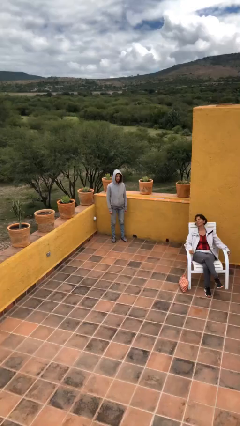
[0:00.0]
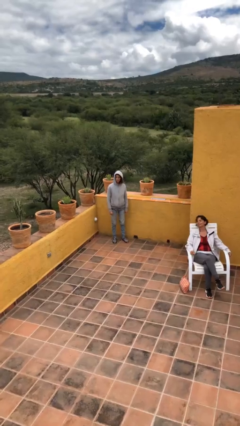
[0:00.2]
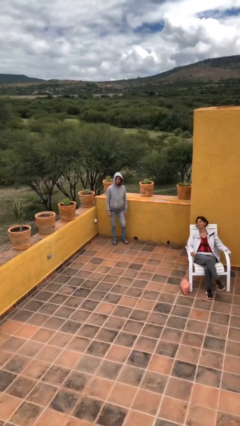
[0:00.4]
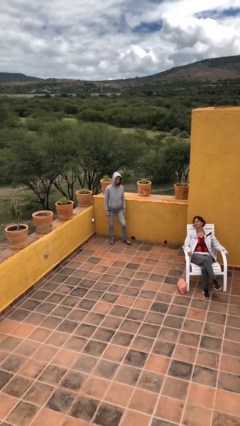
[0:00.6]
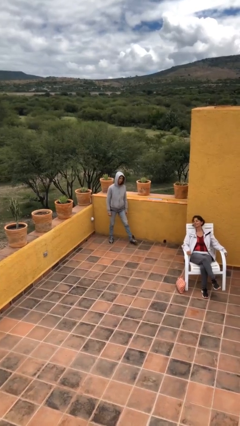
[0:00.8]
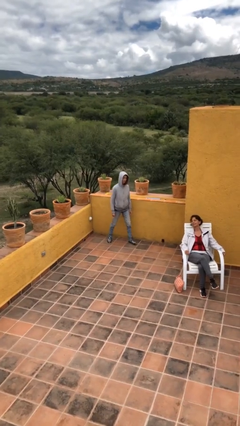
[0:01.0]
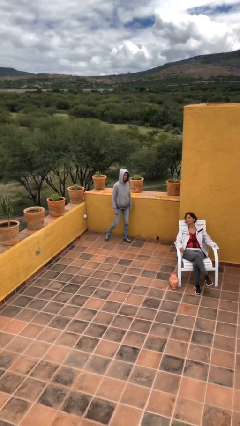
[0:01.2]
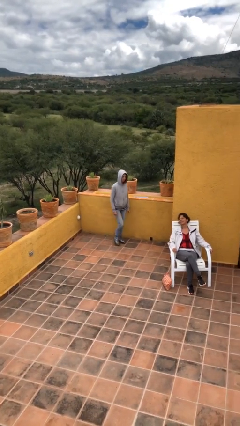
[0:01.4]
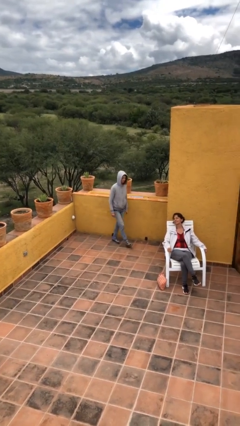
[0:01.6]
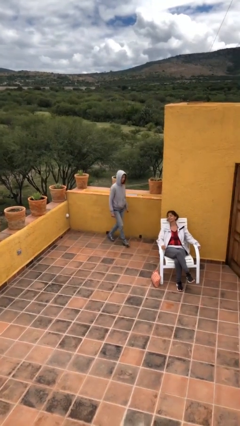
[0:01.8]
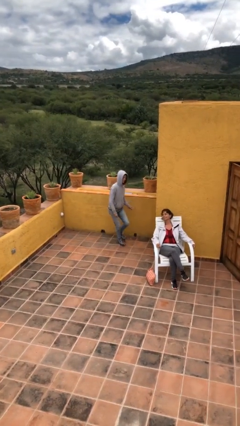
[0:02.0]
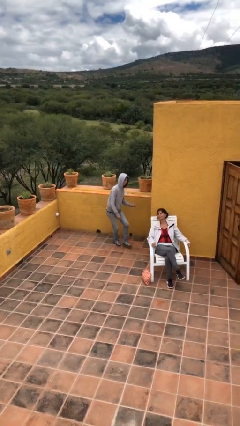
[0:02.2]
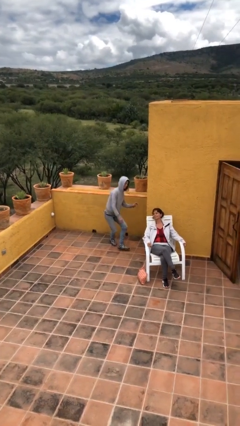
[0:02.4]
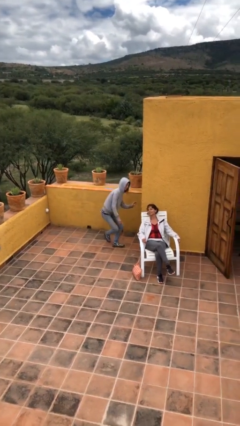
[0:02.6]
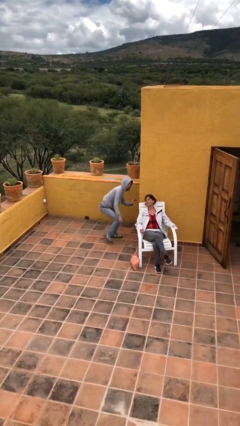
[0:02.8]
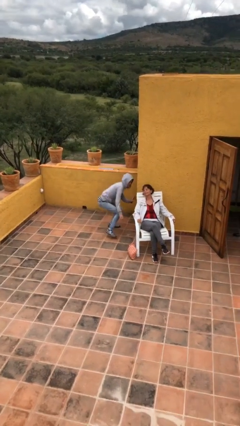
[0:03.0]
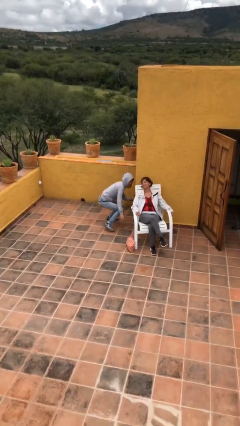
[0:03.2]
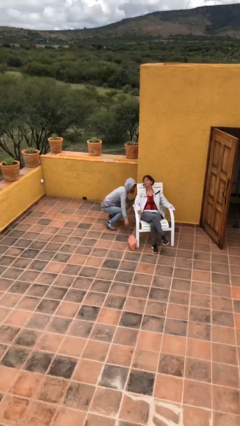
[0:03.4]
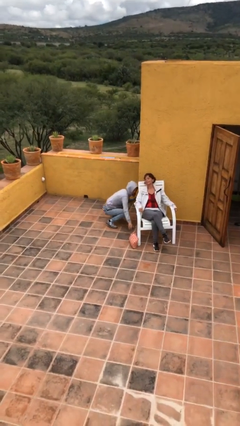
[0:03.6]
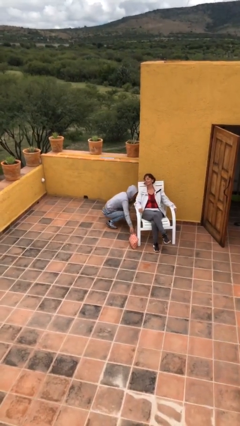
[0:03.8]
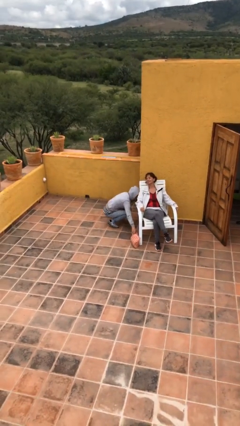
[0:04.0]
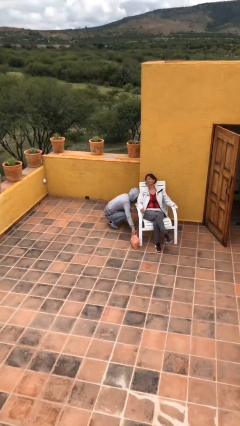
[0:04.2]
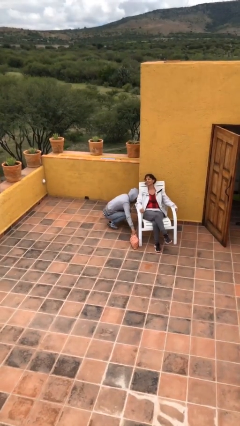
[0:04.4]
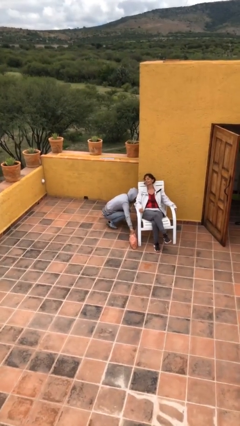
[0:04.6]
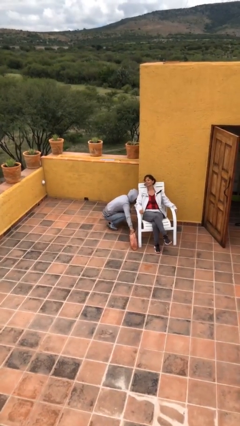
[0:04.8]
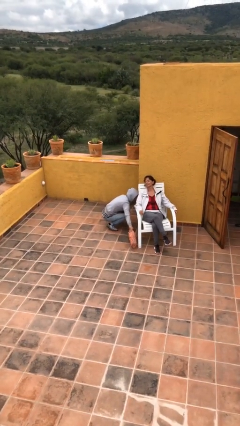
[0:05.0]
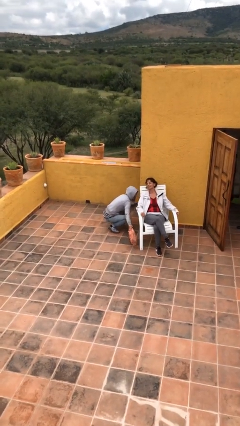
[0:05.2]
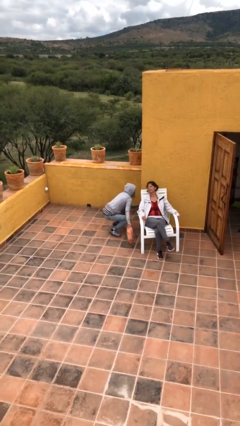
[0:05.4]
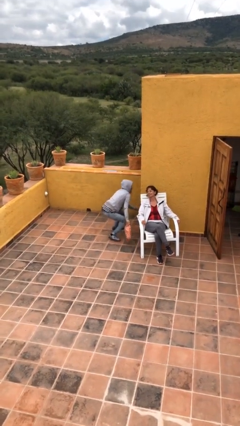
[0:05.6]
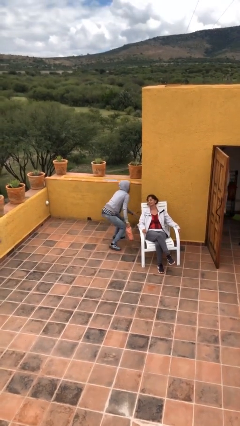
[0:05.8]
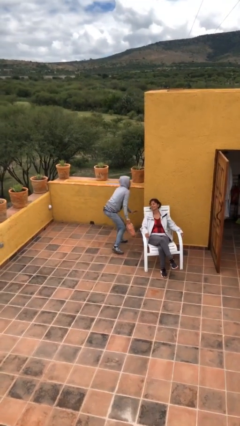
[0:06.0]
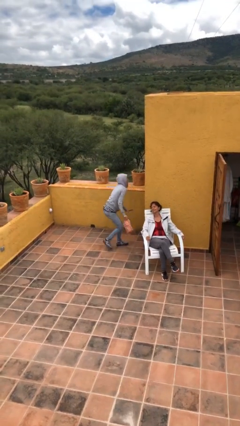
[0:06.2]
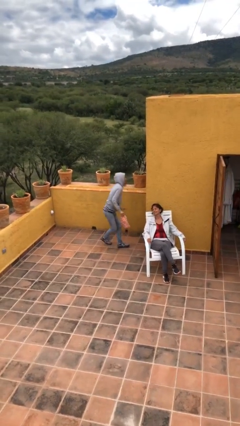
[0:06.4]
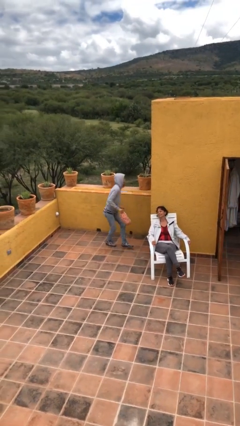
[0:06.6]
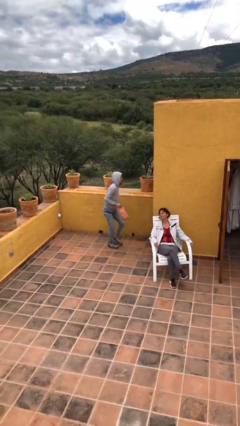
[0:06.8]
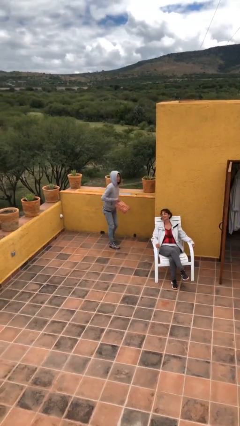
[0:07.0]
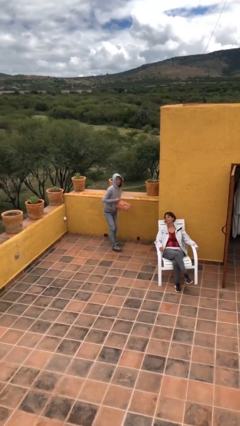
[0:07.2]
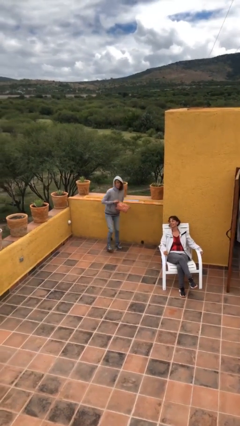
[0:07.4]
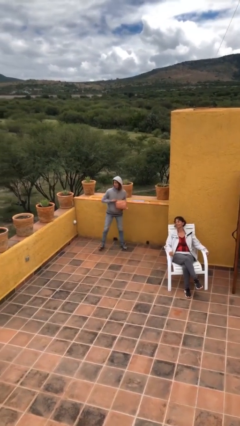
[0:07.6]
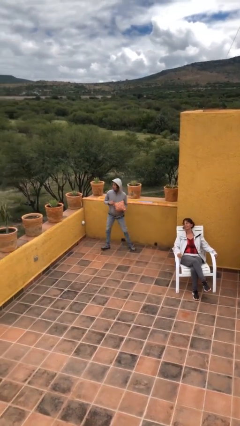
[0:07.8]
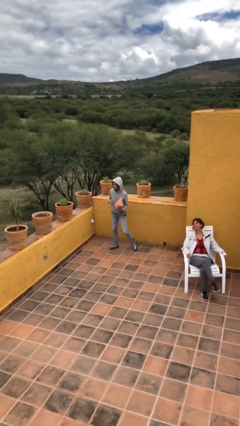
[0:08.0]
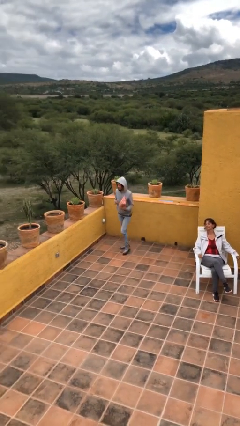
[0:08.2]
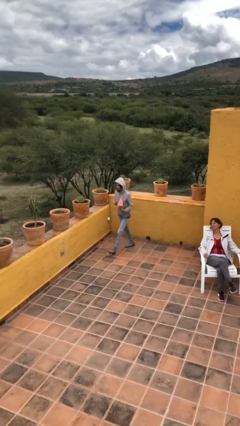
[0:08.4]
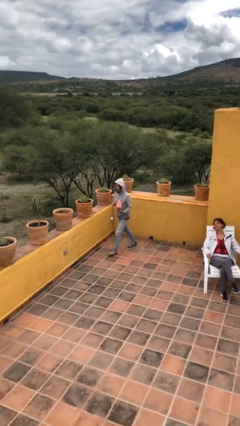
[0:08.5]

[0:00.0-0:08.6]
person steals object from person

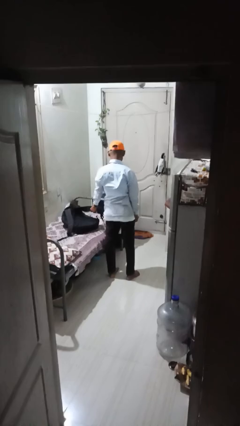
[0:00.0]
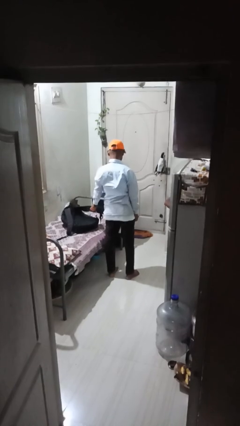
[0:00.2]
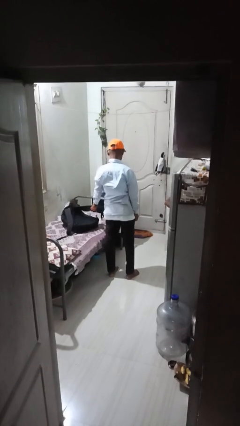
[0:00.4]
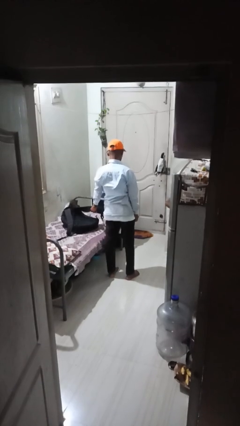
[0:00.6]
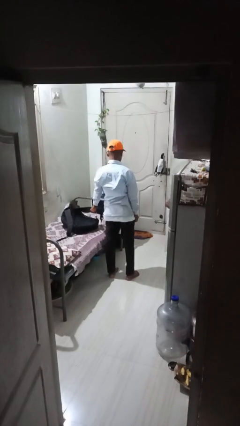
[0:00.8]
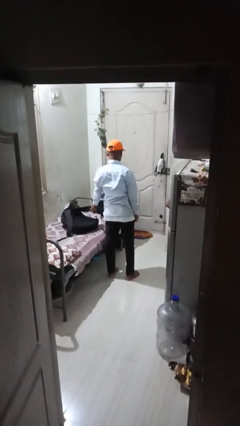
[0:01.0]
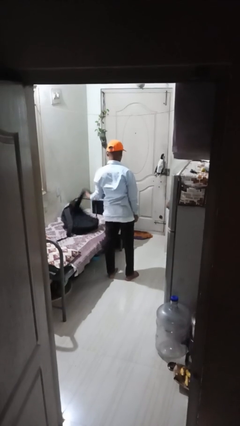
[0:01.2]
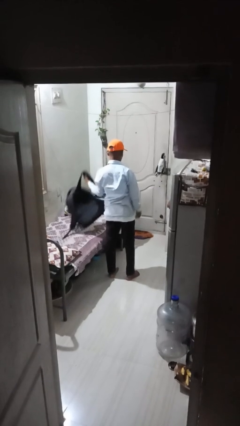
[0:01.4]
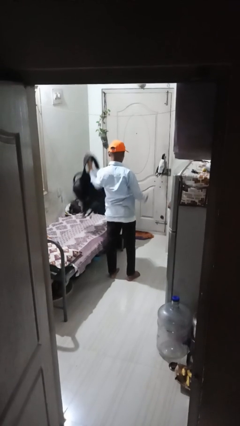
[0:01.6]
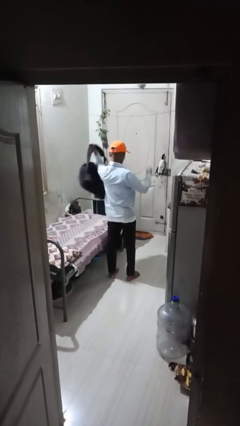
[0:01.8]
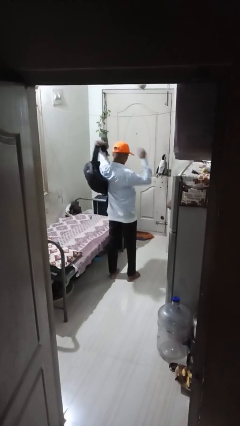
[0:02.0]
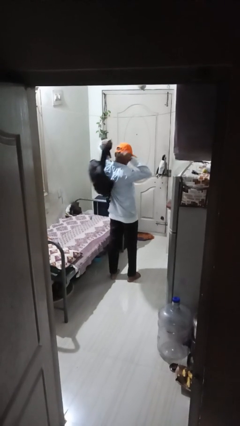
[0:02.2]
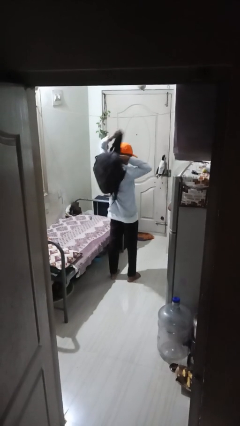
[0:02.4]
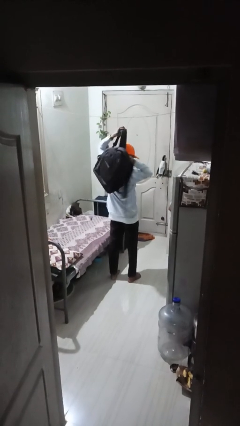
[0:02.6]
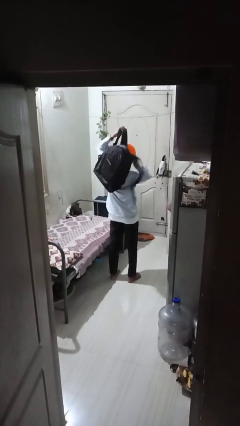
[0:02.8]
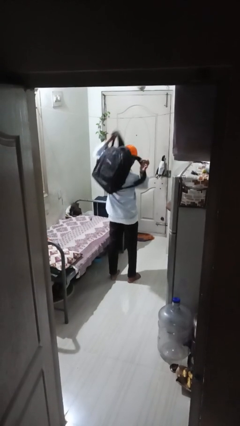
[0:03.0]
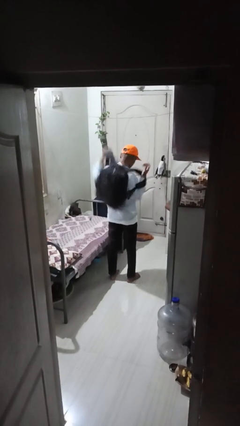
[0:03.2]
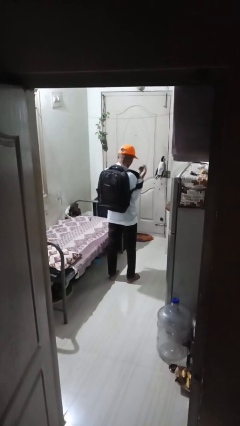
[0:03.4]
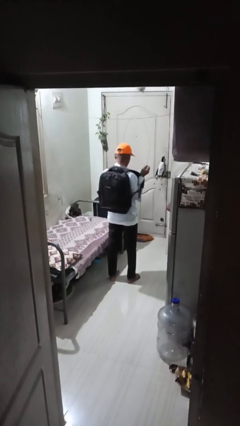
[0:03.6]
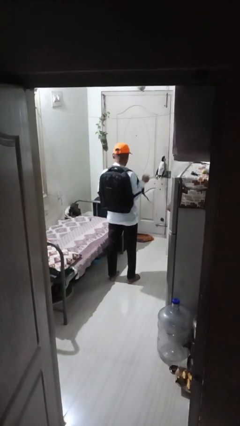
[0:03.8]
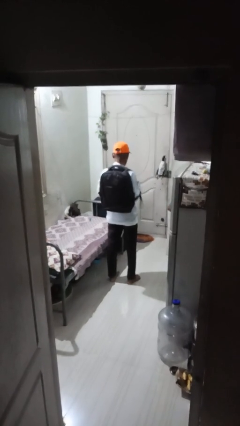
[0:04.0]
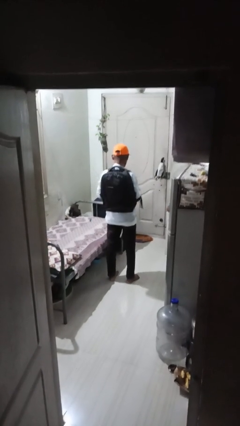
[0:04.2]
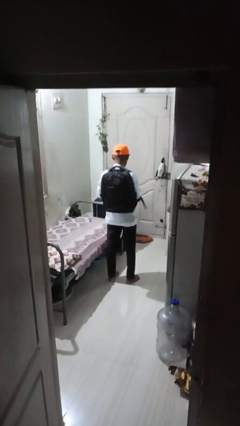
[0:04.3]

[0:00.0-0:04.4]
person puts on backpack

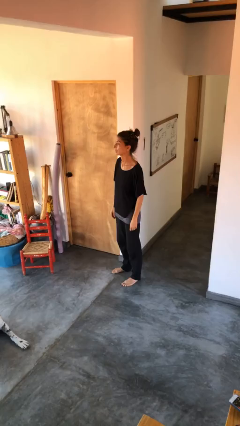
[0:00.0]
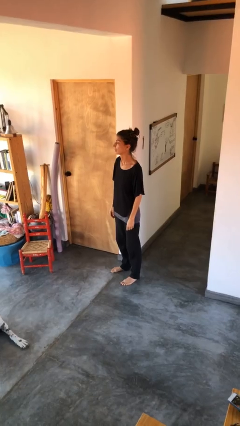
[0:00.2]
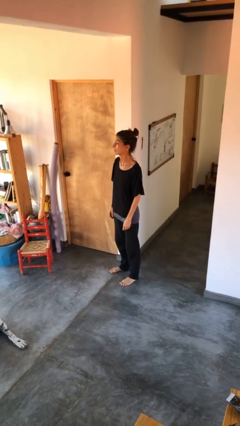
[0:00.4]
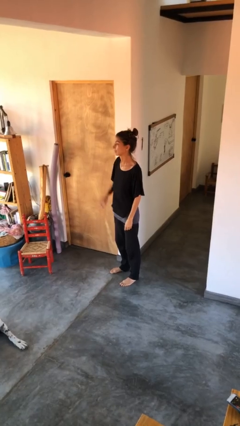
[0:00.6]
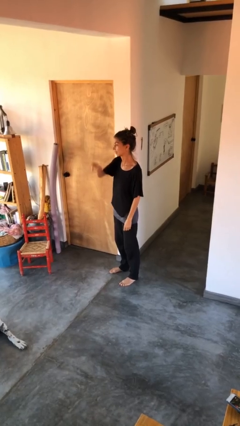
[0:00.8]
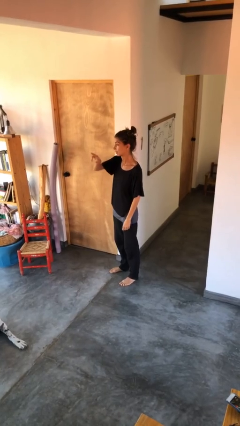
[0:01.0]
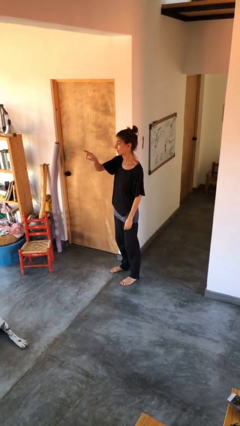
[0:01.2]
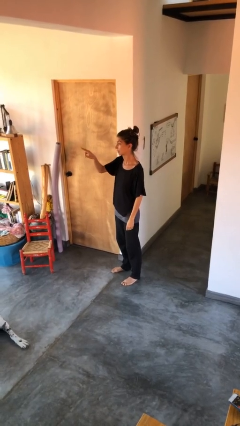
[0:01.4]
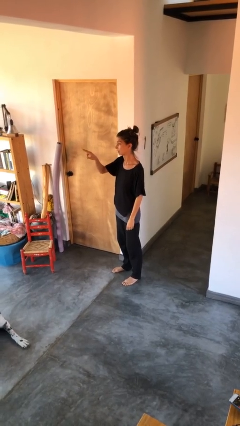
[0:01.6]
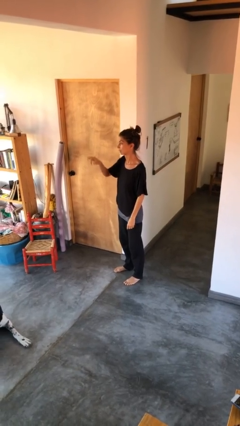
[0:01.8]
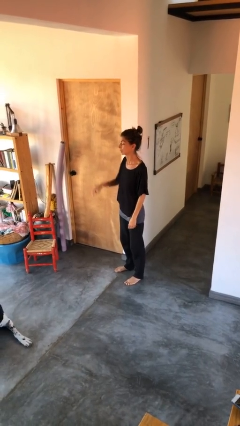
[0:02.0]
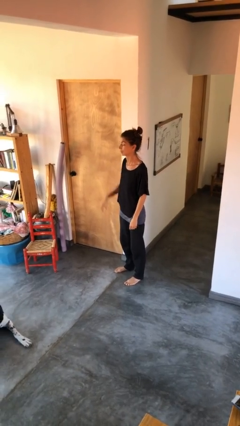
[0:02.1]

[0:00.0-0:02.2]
person gestures swipe right

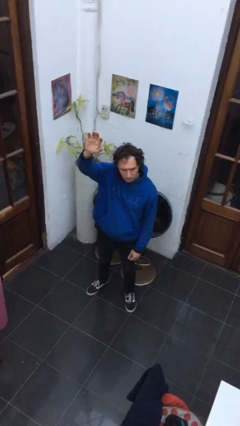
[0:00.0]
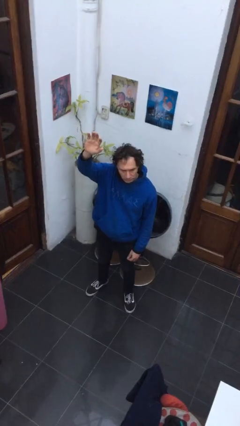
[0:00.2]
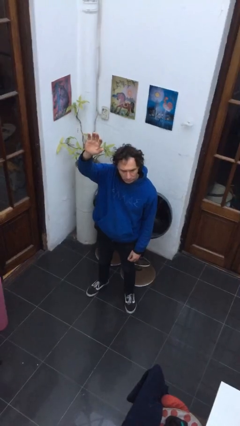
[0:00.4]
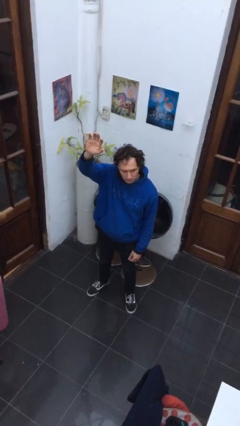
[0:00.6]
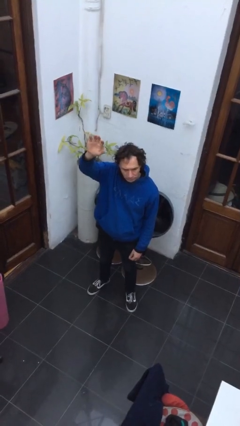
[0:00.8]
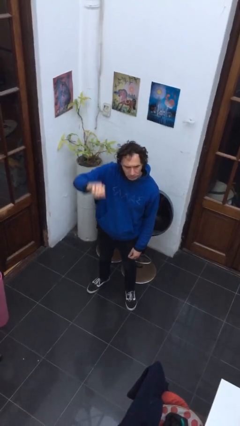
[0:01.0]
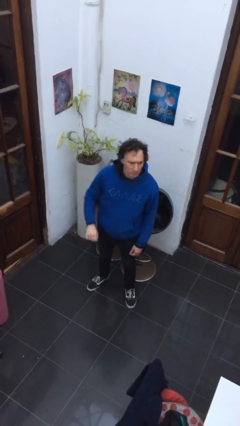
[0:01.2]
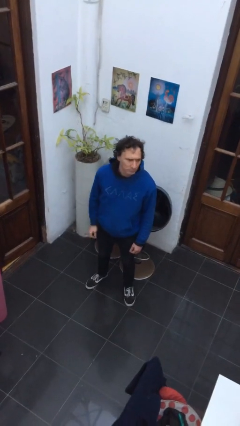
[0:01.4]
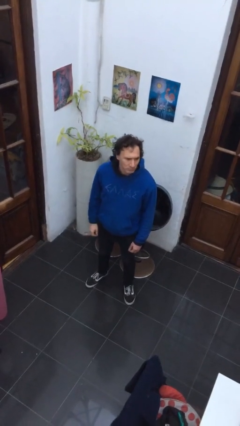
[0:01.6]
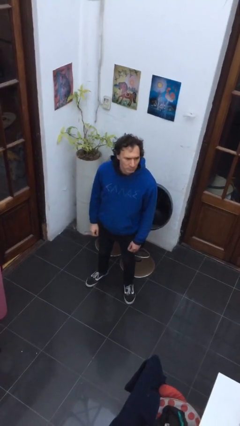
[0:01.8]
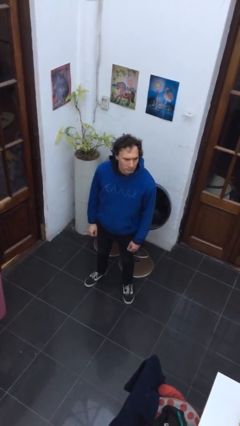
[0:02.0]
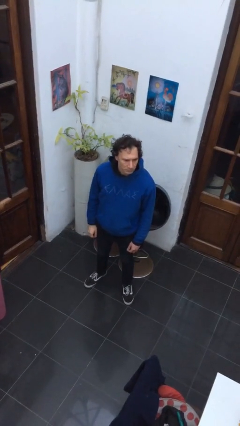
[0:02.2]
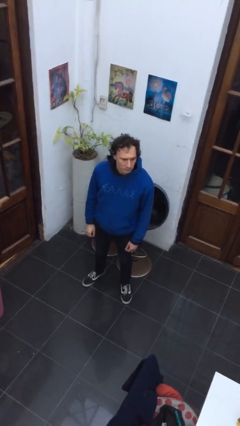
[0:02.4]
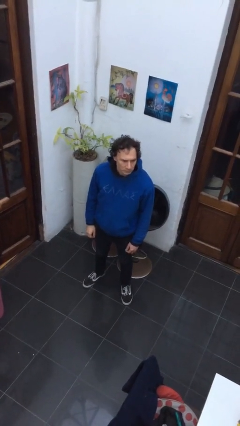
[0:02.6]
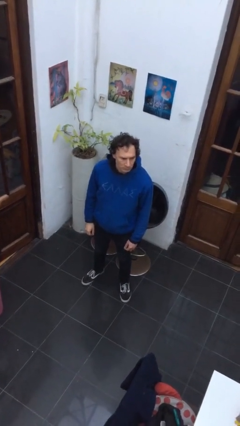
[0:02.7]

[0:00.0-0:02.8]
person gestures lower hand
